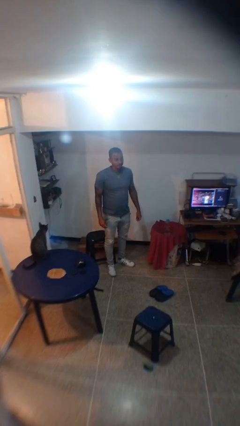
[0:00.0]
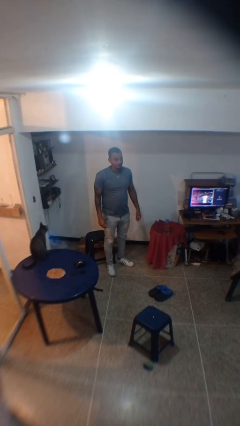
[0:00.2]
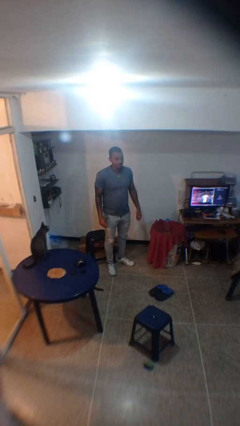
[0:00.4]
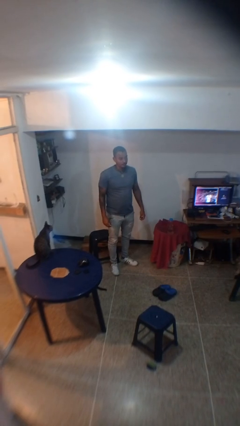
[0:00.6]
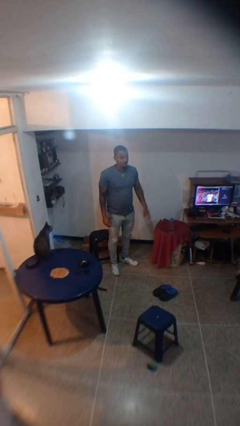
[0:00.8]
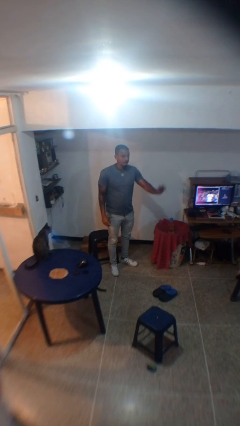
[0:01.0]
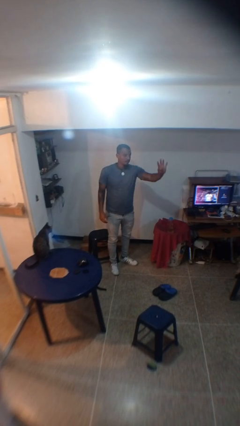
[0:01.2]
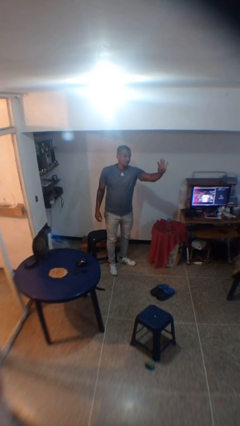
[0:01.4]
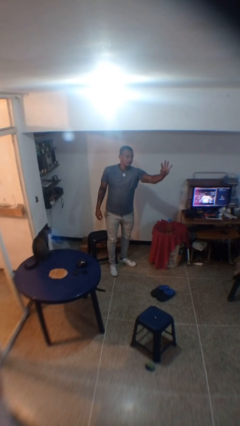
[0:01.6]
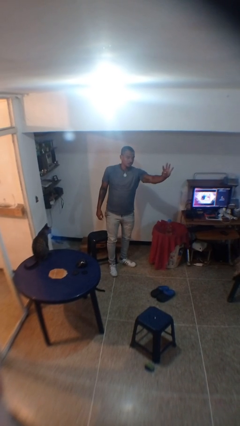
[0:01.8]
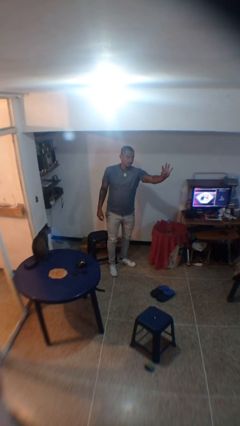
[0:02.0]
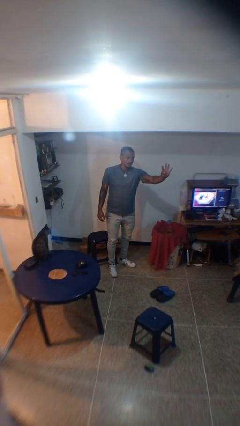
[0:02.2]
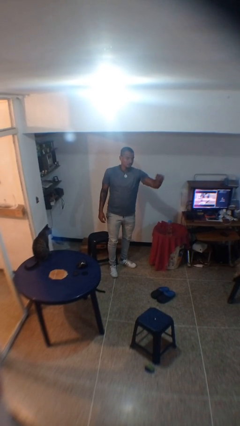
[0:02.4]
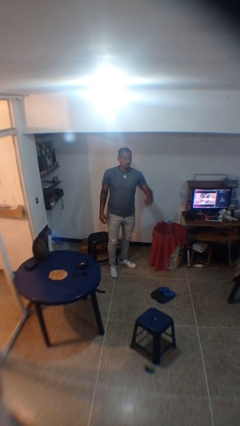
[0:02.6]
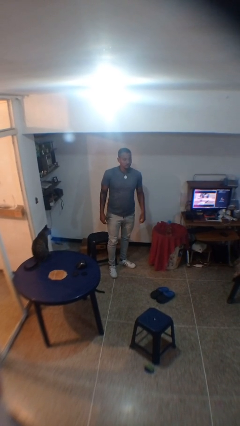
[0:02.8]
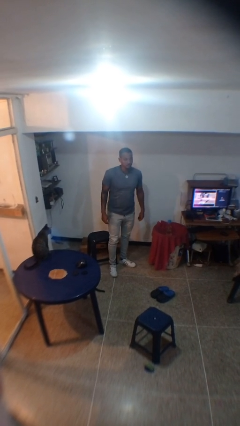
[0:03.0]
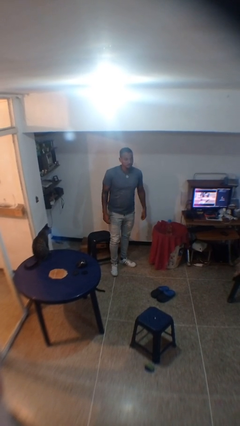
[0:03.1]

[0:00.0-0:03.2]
person gestures number four

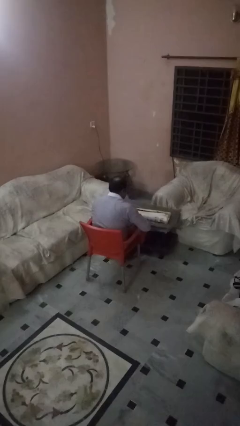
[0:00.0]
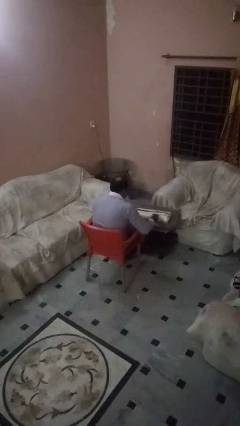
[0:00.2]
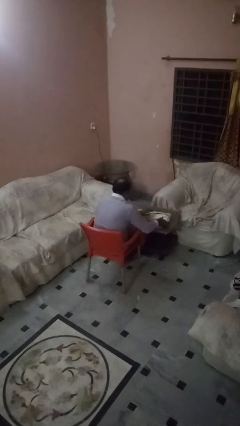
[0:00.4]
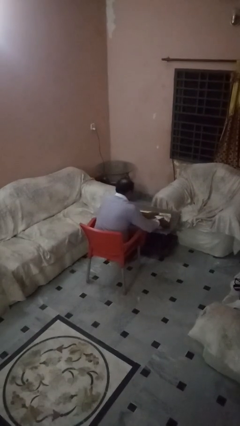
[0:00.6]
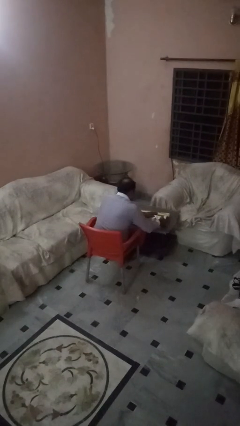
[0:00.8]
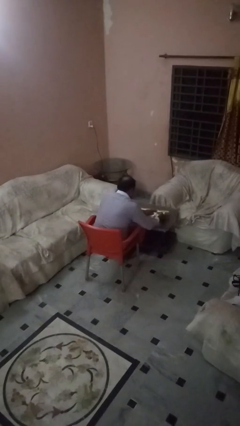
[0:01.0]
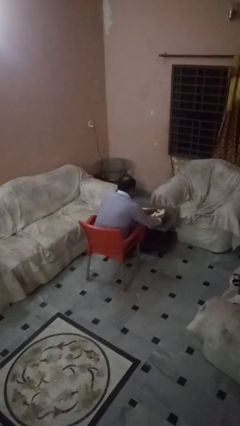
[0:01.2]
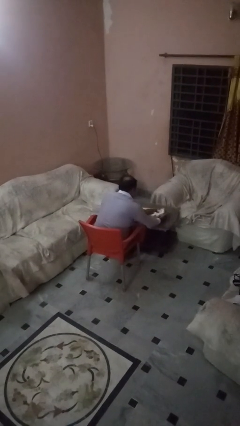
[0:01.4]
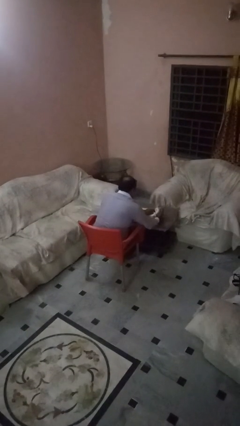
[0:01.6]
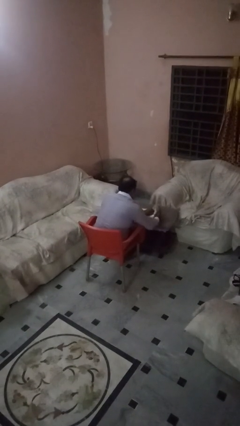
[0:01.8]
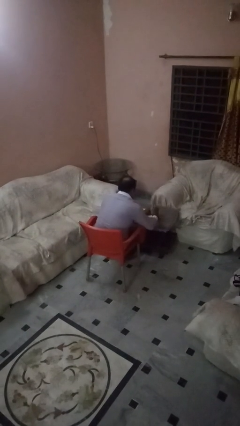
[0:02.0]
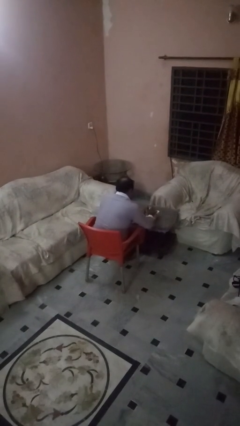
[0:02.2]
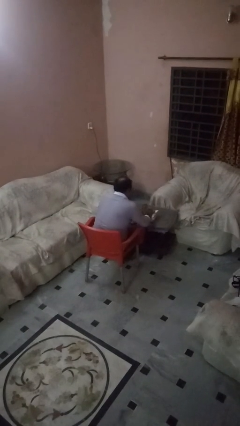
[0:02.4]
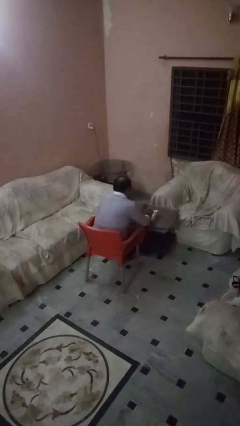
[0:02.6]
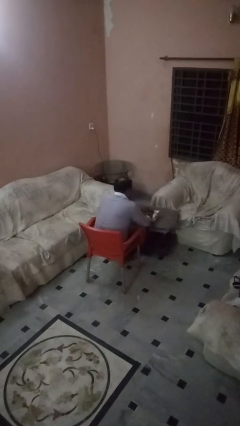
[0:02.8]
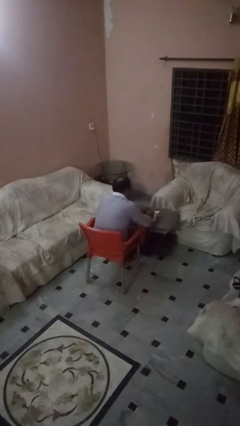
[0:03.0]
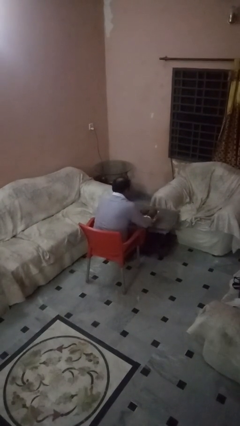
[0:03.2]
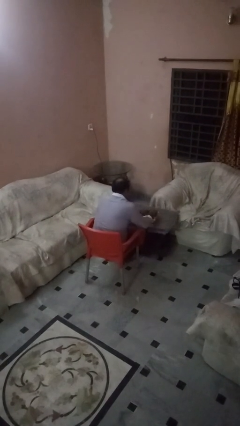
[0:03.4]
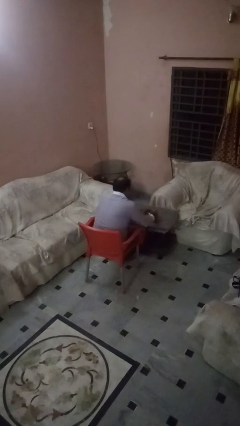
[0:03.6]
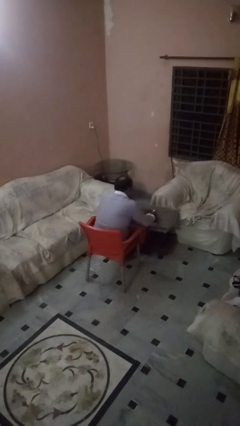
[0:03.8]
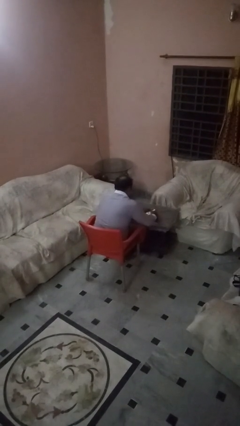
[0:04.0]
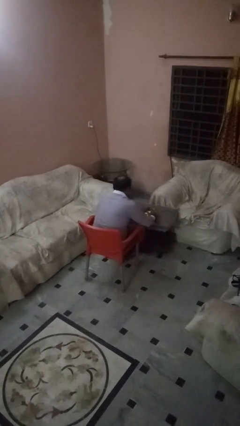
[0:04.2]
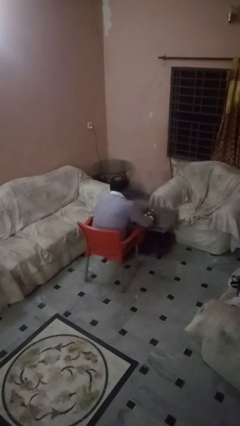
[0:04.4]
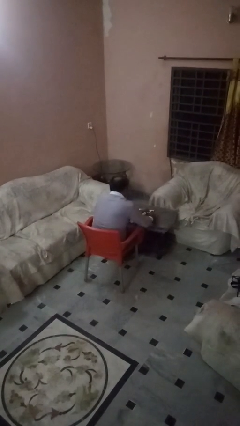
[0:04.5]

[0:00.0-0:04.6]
person wraps box

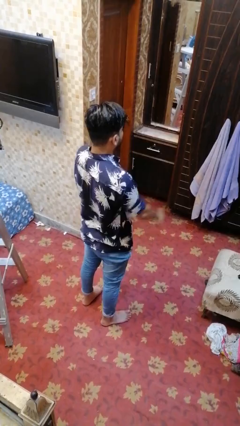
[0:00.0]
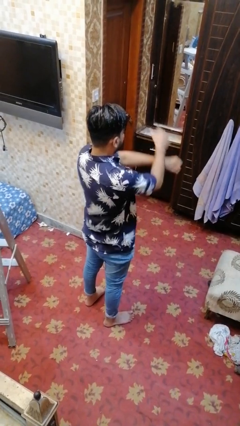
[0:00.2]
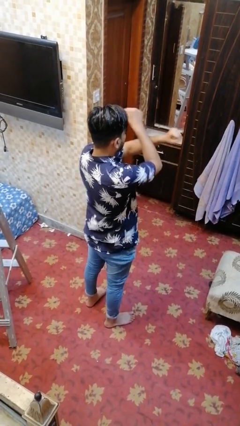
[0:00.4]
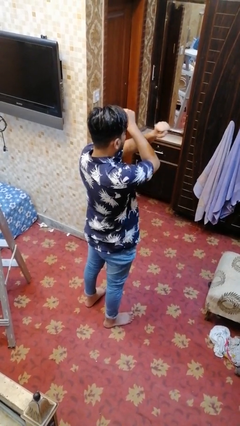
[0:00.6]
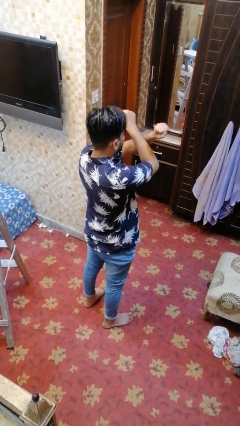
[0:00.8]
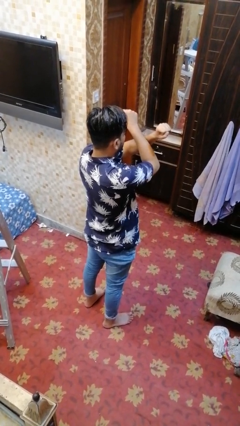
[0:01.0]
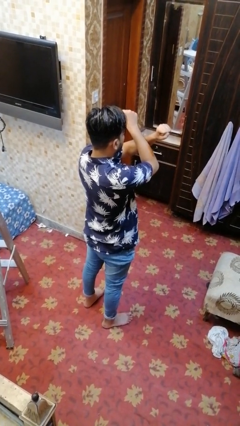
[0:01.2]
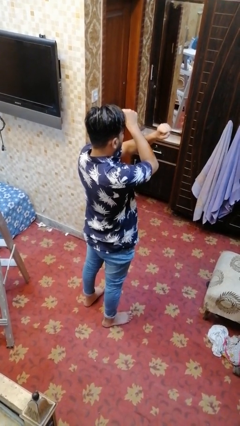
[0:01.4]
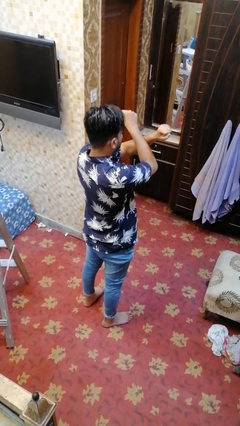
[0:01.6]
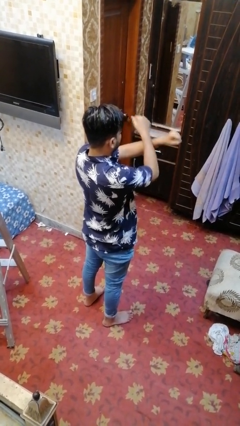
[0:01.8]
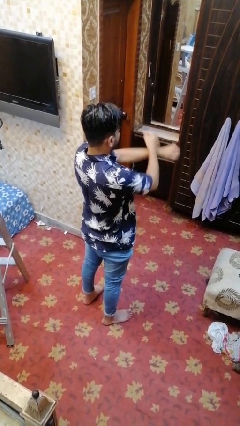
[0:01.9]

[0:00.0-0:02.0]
person crosses arms

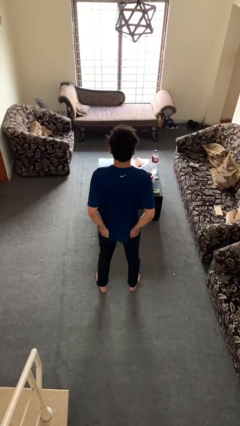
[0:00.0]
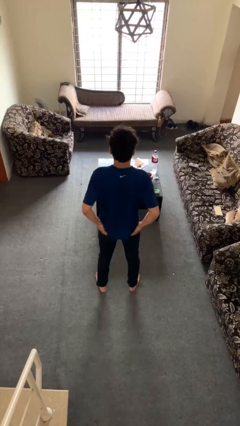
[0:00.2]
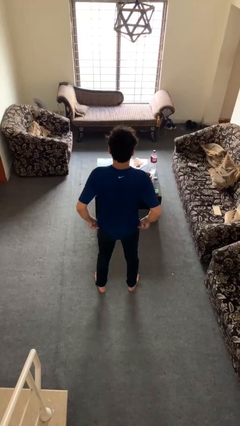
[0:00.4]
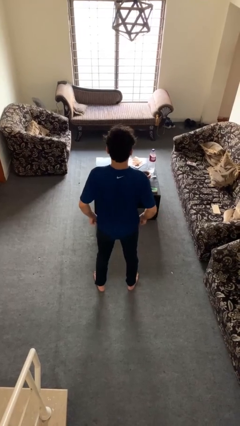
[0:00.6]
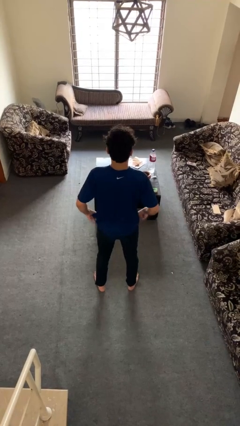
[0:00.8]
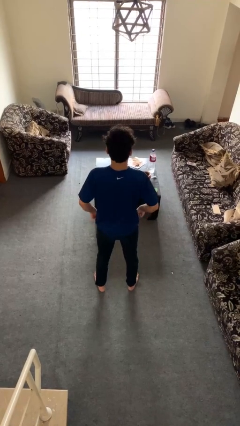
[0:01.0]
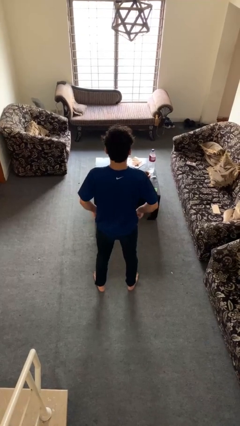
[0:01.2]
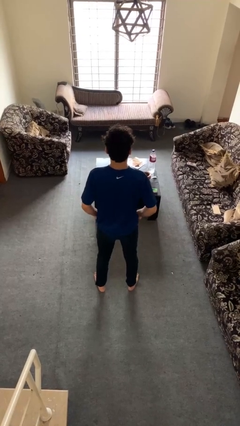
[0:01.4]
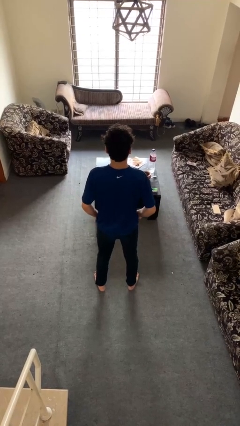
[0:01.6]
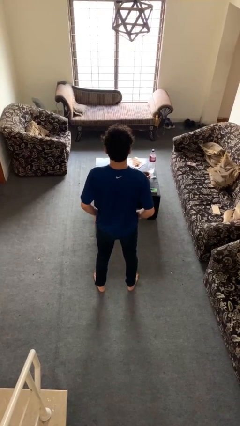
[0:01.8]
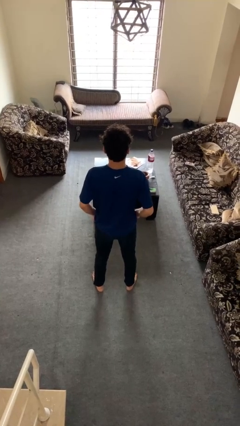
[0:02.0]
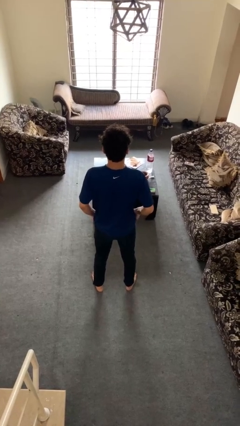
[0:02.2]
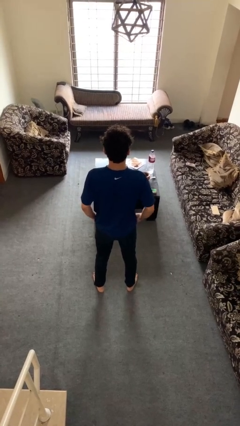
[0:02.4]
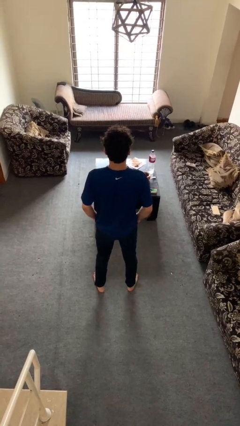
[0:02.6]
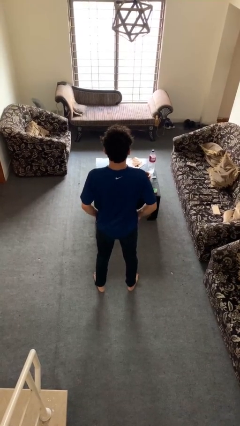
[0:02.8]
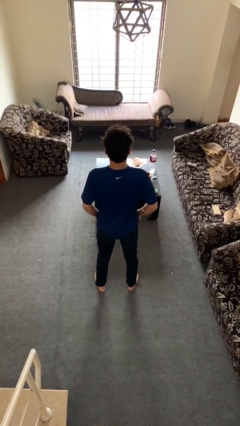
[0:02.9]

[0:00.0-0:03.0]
person puts hands in back pockets

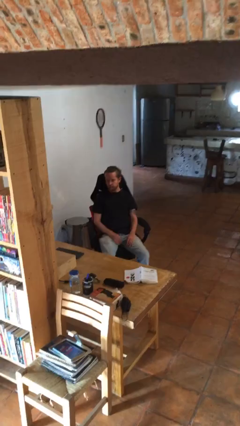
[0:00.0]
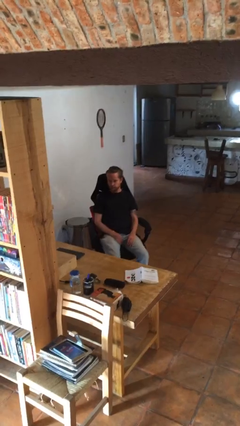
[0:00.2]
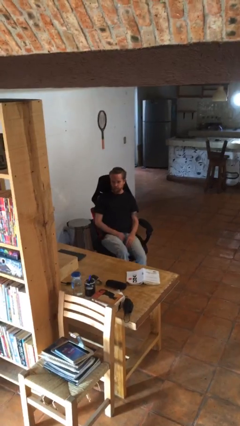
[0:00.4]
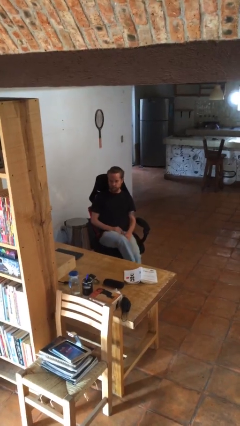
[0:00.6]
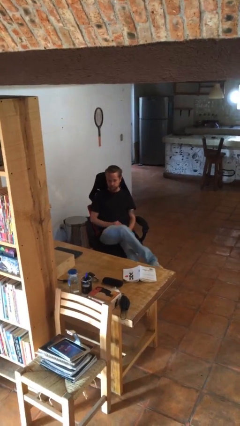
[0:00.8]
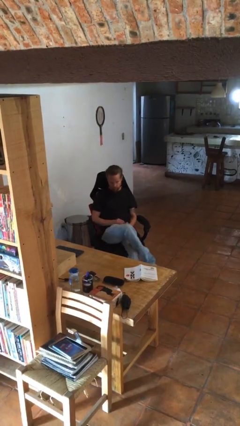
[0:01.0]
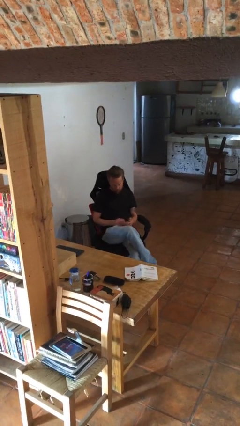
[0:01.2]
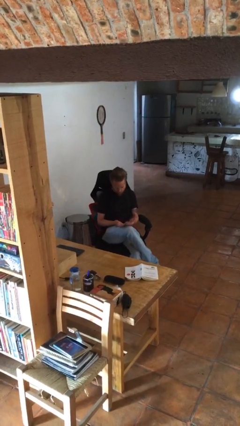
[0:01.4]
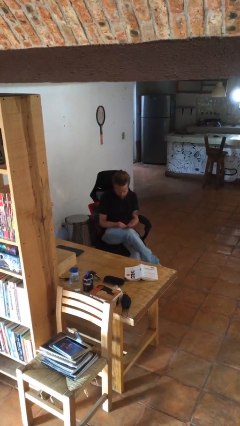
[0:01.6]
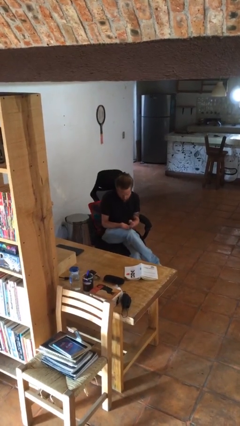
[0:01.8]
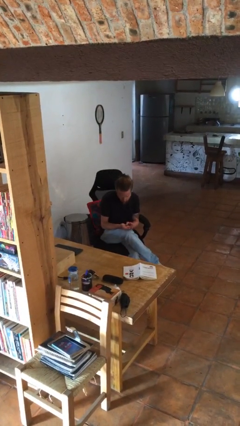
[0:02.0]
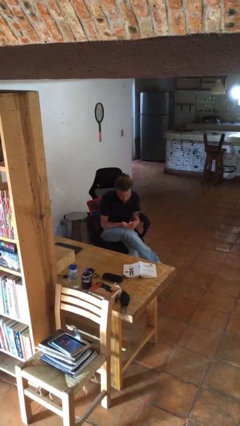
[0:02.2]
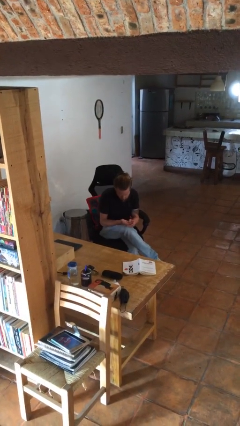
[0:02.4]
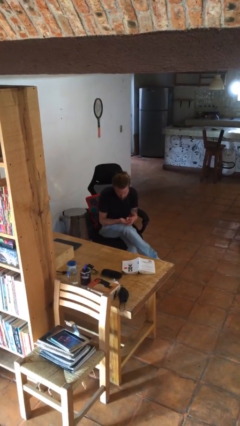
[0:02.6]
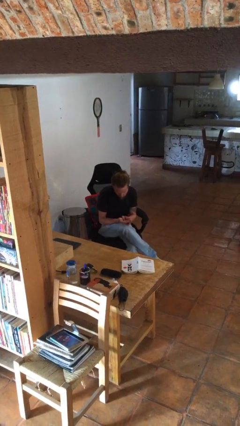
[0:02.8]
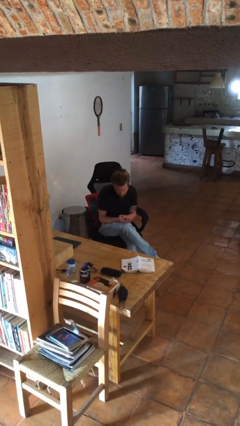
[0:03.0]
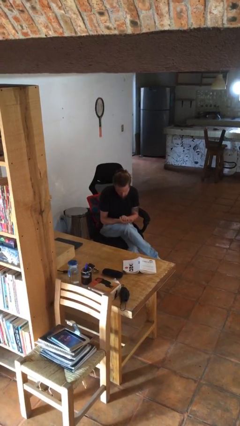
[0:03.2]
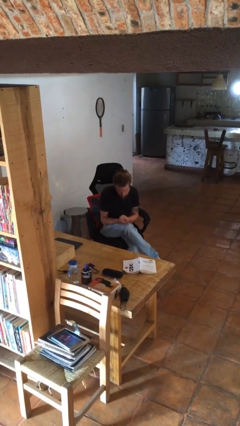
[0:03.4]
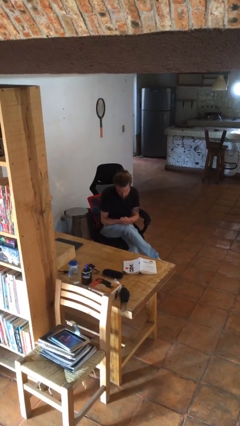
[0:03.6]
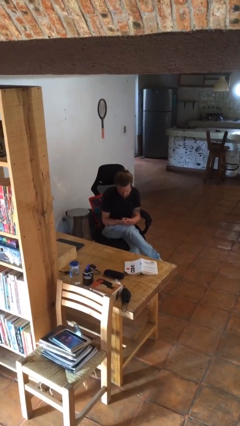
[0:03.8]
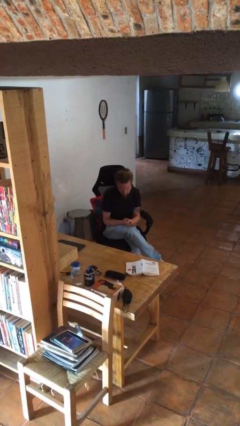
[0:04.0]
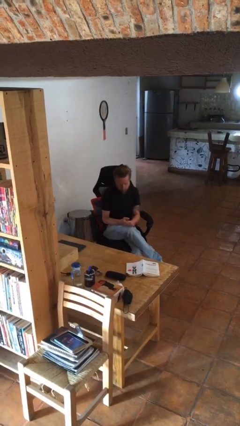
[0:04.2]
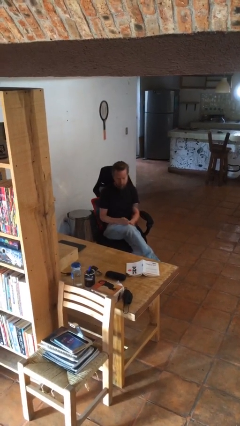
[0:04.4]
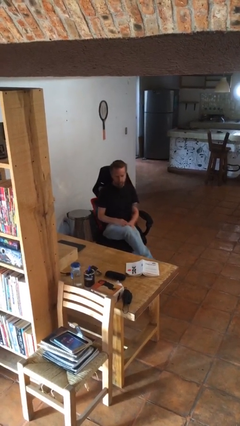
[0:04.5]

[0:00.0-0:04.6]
person looks at hands in lap

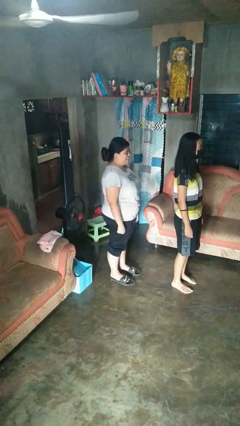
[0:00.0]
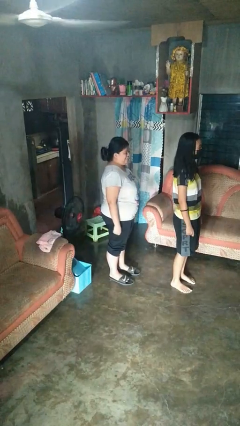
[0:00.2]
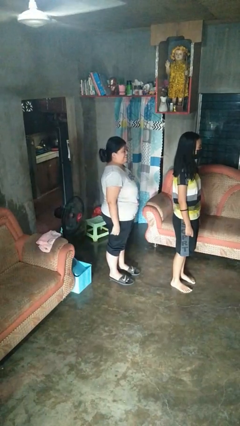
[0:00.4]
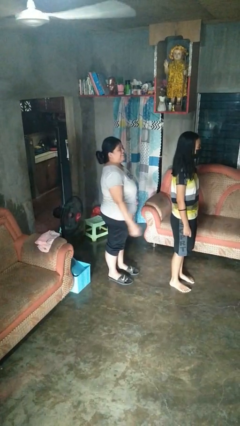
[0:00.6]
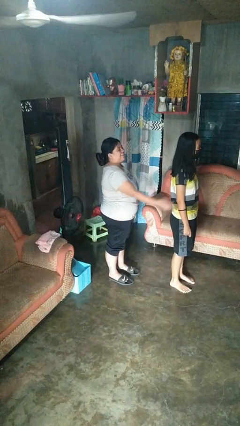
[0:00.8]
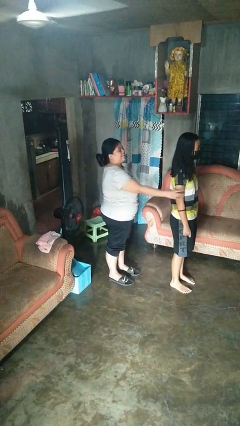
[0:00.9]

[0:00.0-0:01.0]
person grabs person by shoulder
